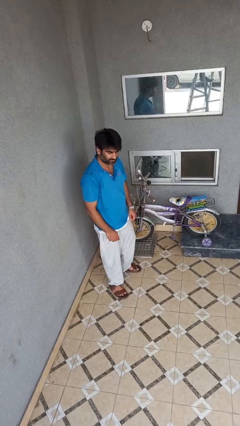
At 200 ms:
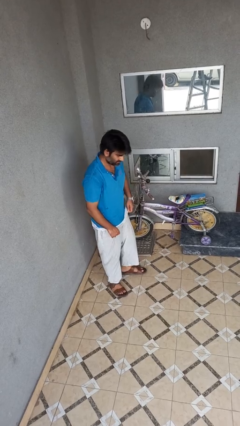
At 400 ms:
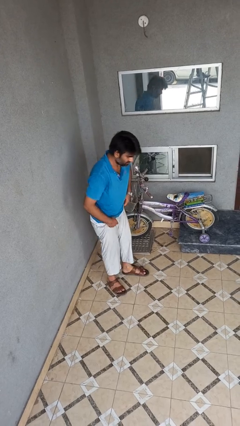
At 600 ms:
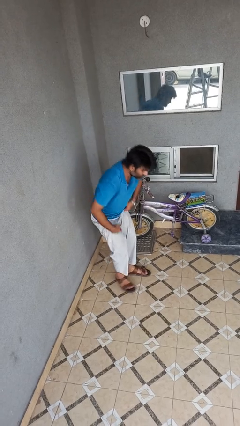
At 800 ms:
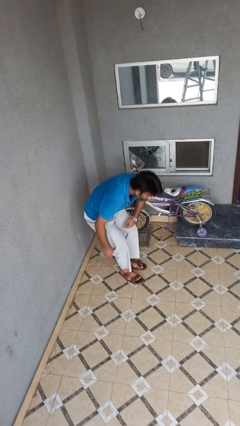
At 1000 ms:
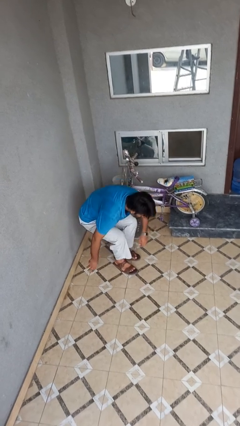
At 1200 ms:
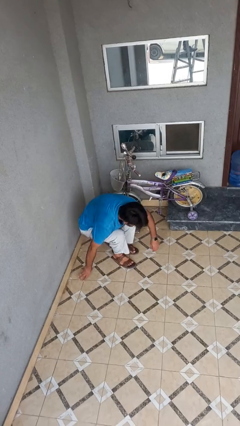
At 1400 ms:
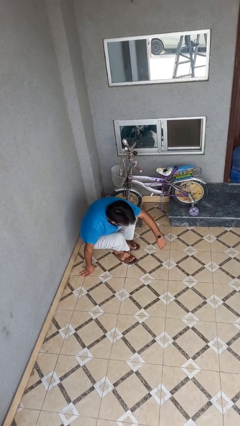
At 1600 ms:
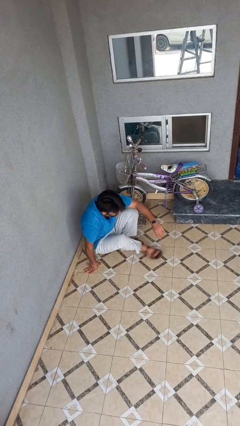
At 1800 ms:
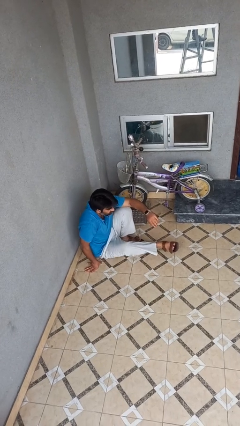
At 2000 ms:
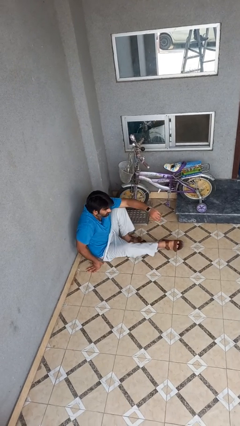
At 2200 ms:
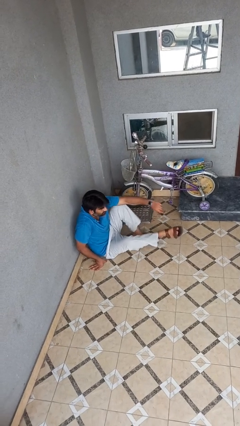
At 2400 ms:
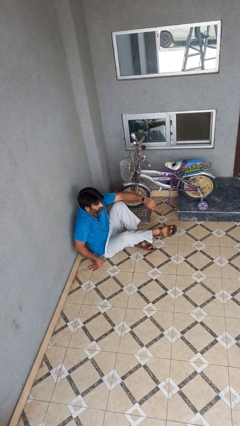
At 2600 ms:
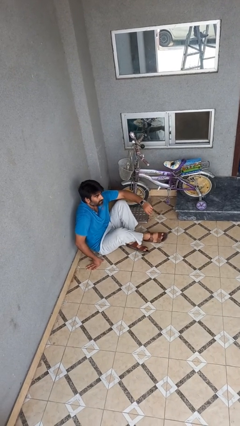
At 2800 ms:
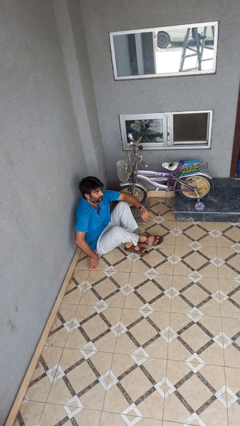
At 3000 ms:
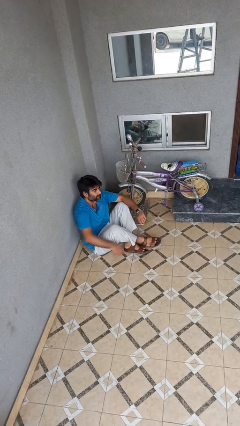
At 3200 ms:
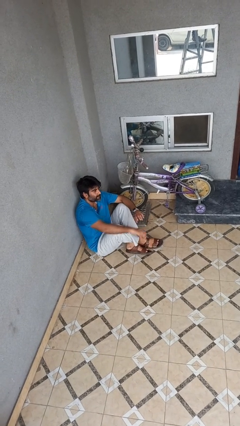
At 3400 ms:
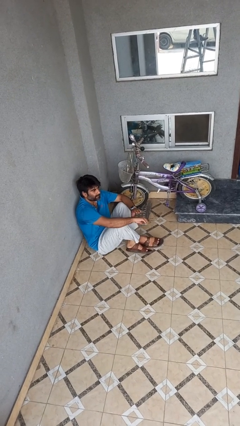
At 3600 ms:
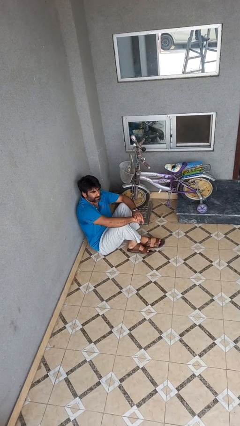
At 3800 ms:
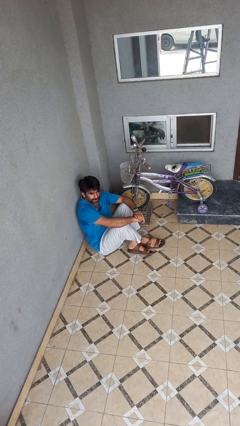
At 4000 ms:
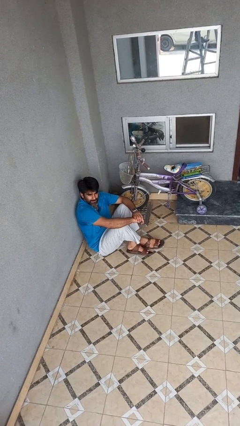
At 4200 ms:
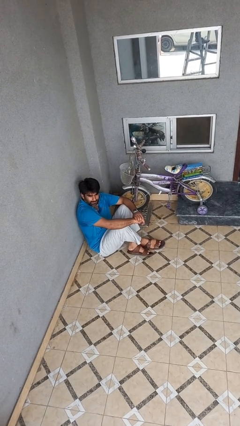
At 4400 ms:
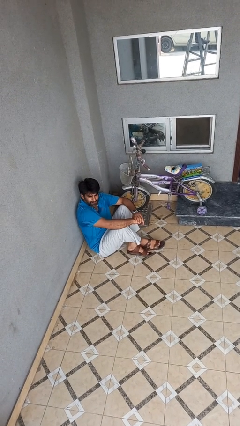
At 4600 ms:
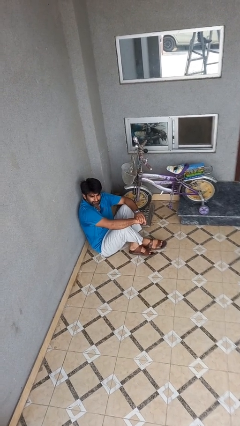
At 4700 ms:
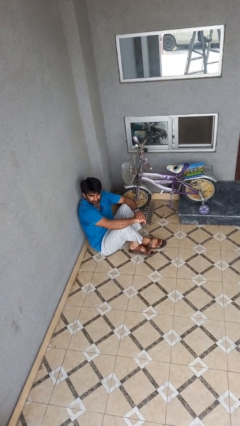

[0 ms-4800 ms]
person sits crisscross

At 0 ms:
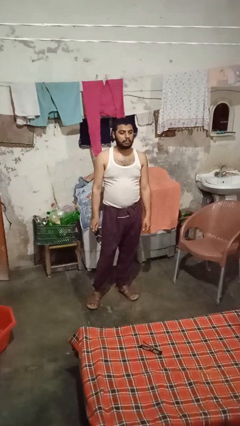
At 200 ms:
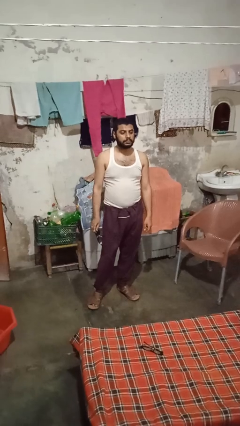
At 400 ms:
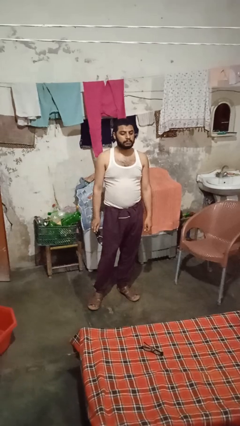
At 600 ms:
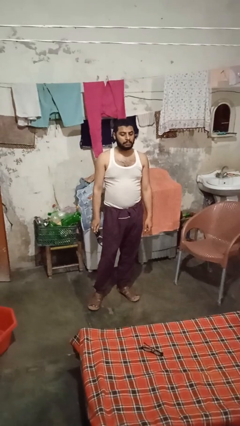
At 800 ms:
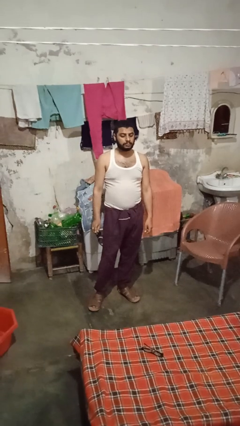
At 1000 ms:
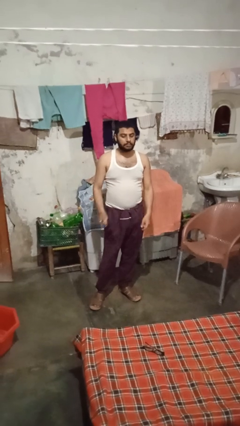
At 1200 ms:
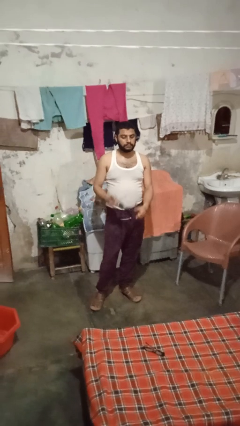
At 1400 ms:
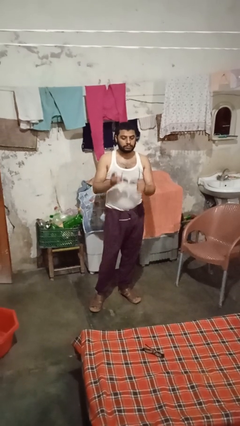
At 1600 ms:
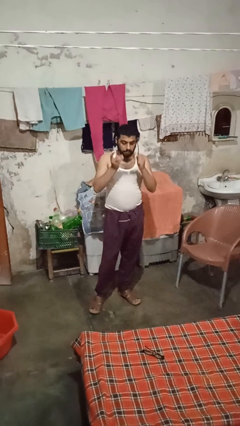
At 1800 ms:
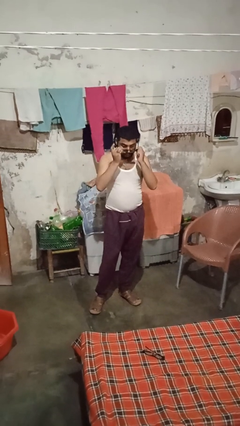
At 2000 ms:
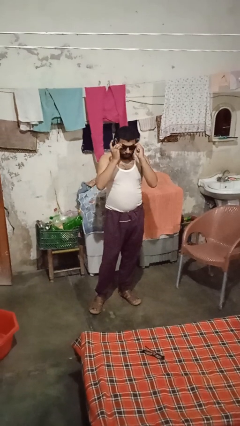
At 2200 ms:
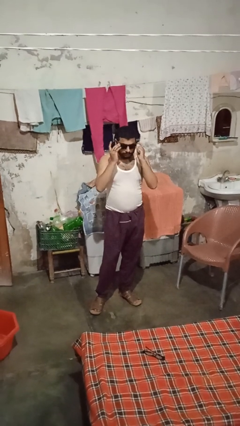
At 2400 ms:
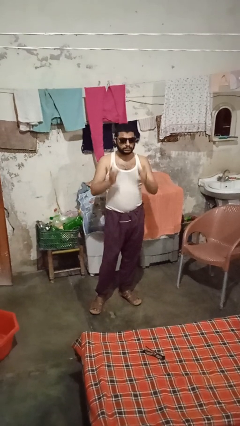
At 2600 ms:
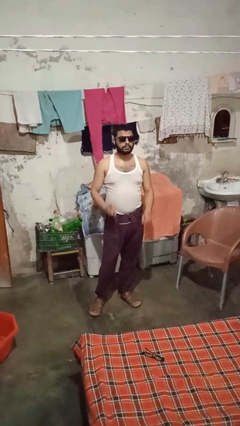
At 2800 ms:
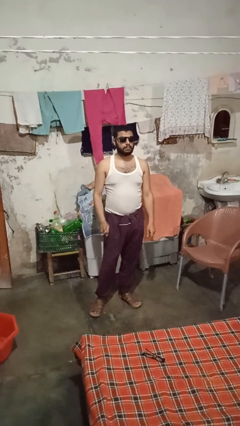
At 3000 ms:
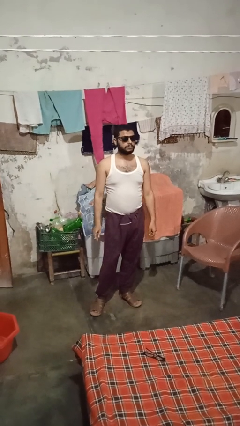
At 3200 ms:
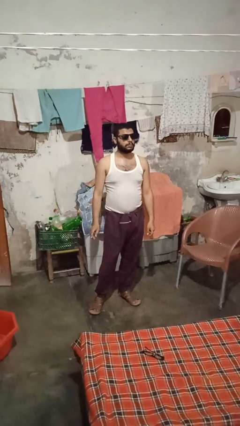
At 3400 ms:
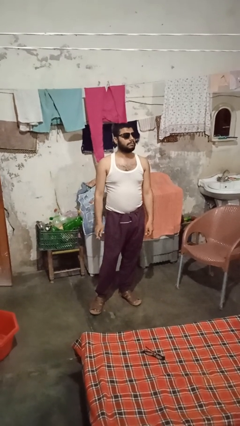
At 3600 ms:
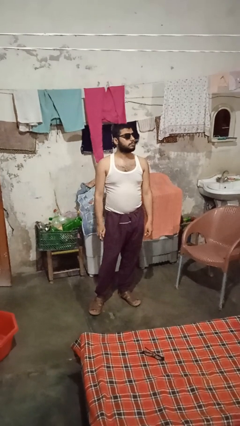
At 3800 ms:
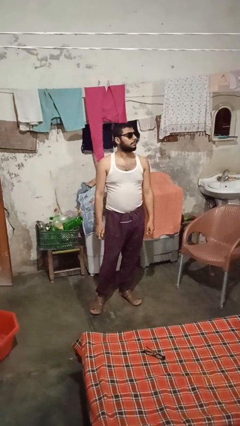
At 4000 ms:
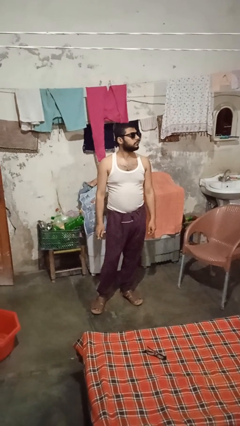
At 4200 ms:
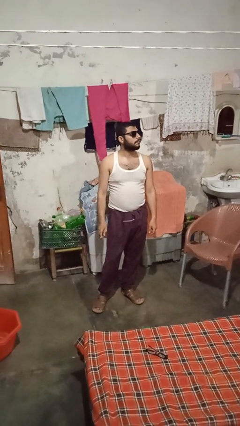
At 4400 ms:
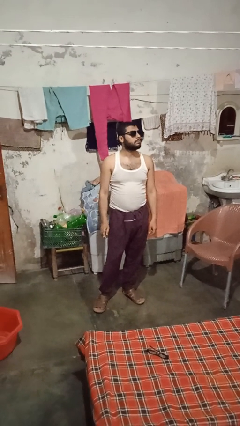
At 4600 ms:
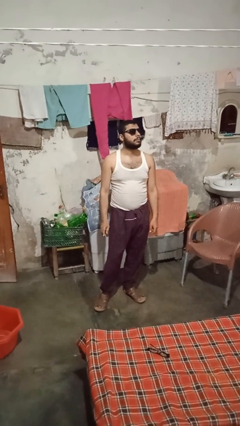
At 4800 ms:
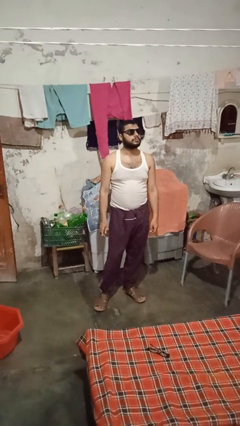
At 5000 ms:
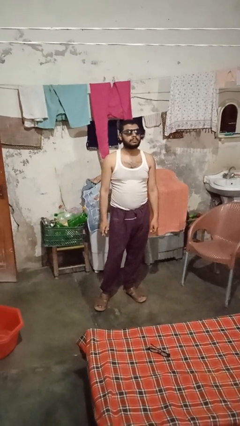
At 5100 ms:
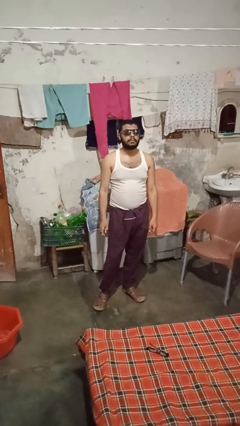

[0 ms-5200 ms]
person puts on sunglasses

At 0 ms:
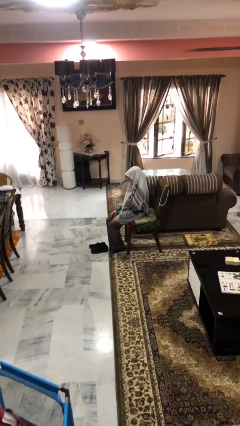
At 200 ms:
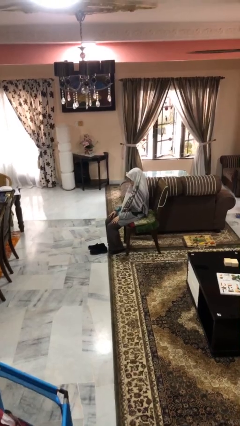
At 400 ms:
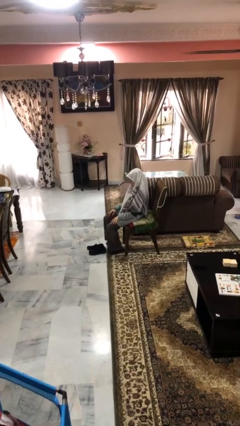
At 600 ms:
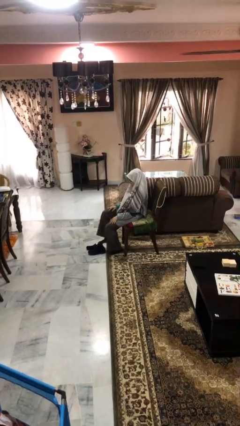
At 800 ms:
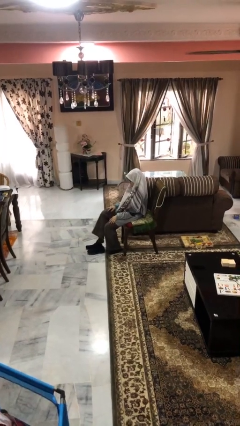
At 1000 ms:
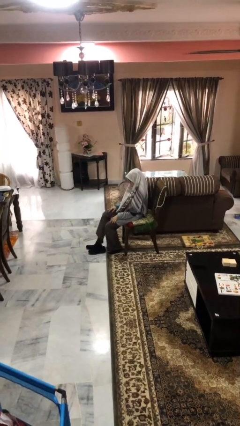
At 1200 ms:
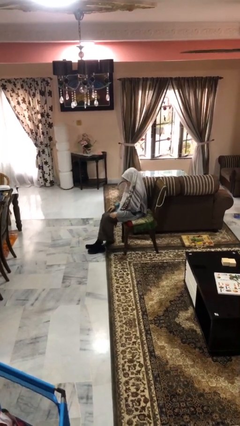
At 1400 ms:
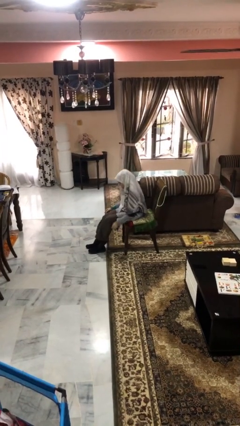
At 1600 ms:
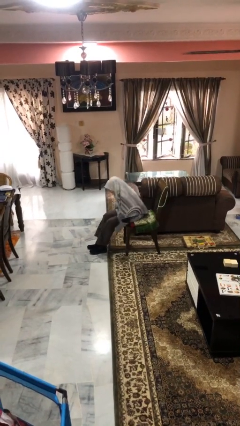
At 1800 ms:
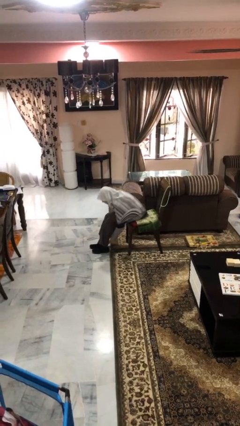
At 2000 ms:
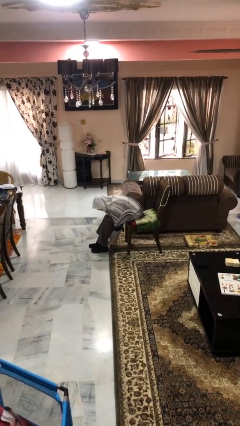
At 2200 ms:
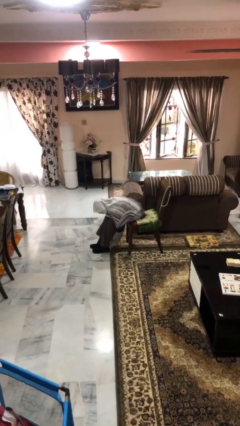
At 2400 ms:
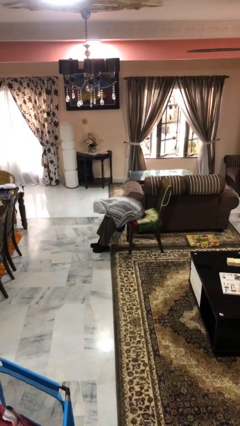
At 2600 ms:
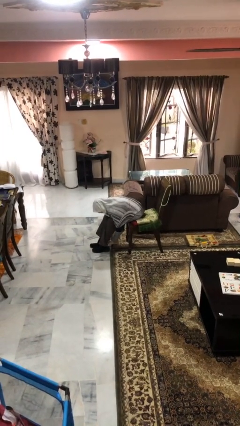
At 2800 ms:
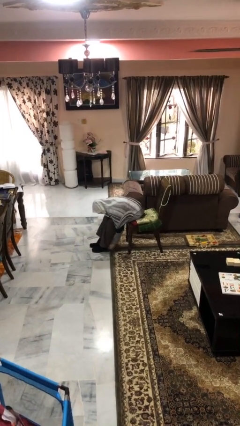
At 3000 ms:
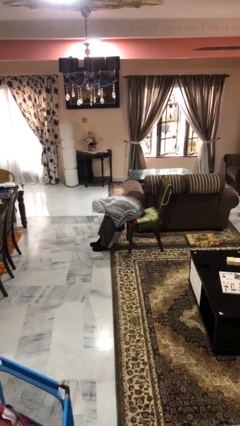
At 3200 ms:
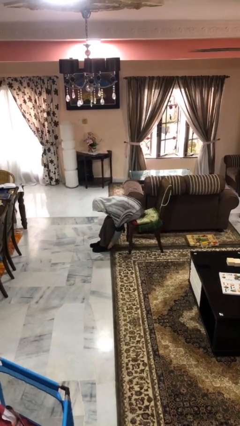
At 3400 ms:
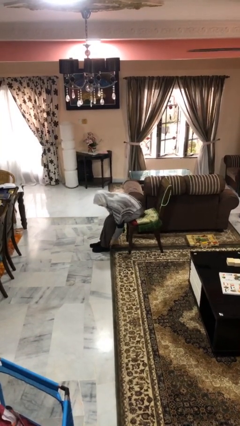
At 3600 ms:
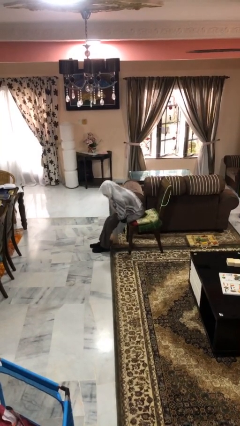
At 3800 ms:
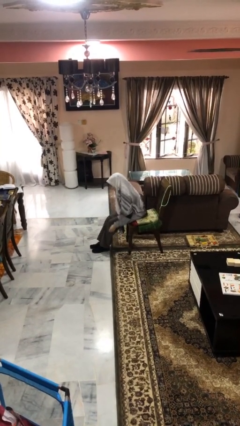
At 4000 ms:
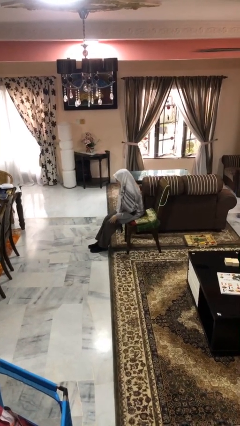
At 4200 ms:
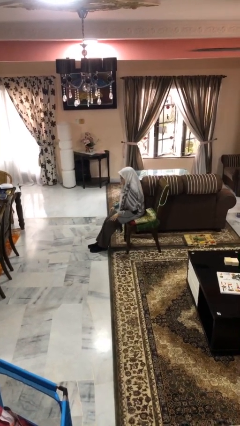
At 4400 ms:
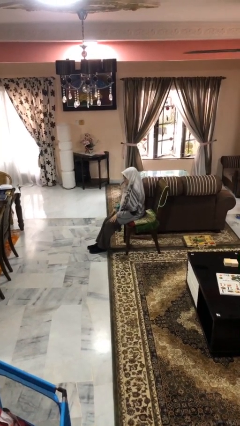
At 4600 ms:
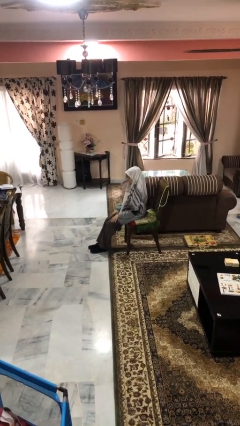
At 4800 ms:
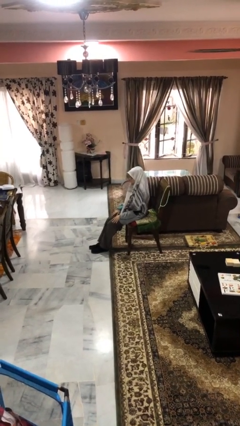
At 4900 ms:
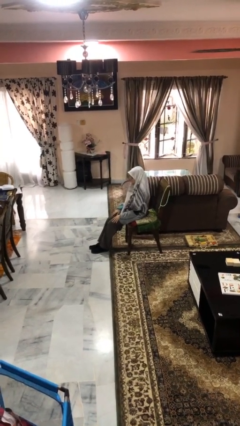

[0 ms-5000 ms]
person puts on shoes

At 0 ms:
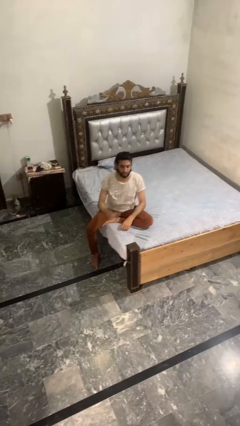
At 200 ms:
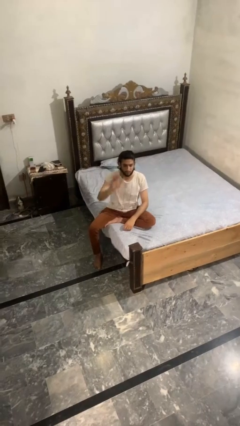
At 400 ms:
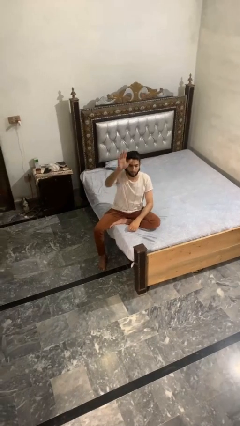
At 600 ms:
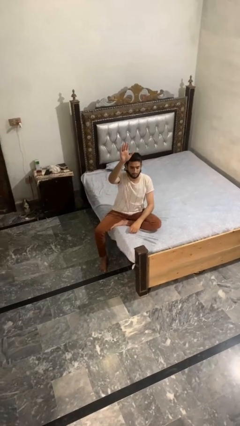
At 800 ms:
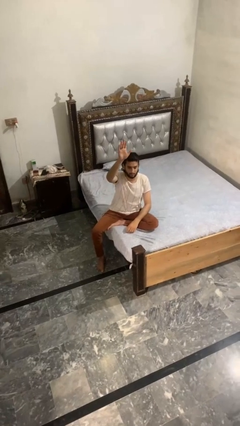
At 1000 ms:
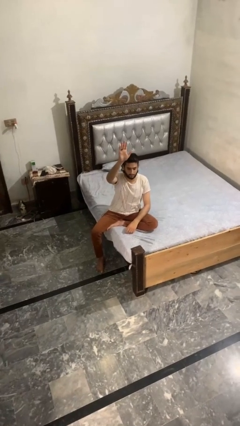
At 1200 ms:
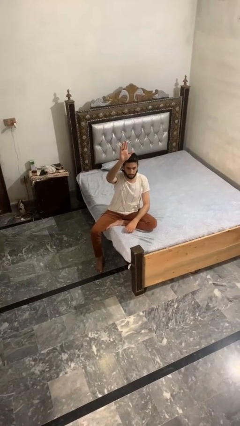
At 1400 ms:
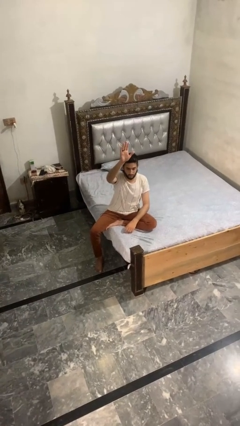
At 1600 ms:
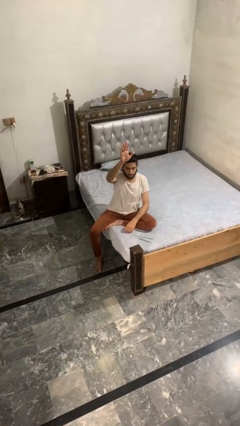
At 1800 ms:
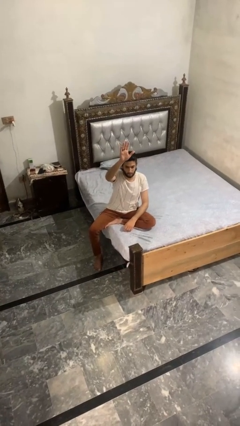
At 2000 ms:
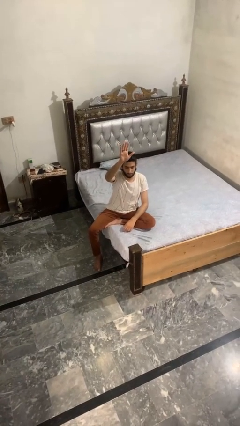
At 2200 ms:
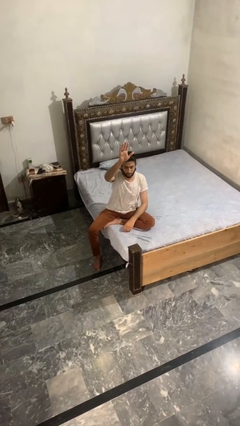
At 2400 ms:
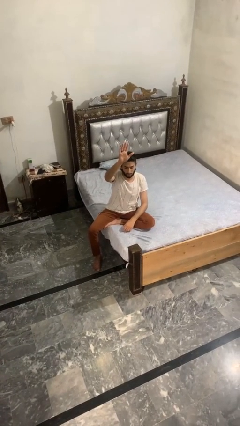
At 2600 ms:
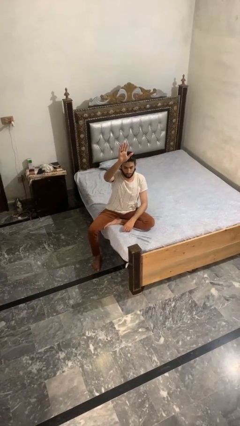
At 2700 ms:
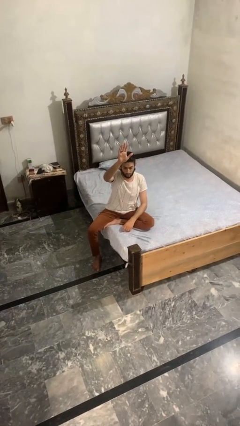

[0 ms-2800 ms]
person gestures raise hand
